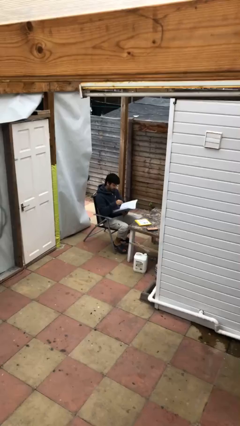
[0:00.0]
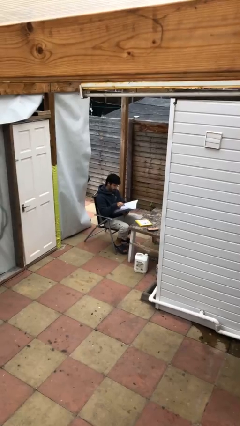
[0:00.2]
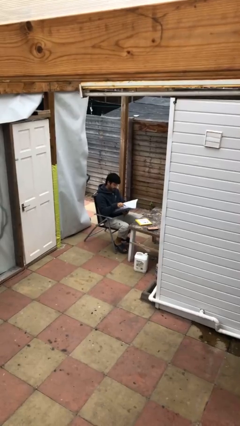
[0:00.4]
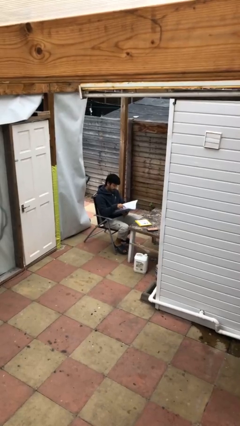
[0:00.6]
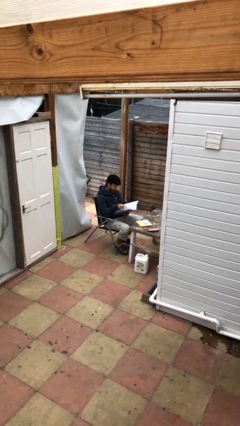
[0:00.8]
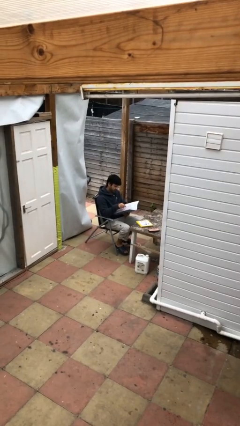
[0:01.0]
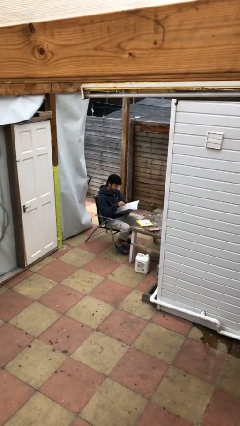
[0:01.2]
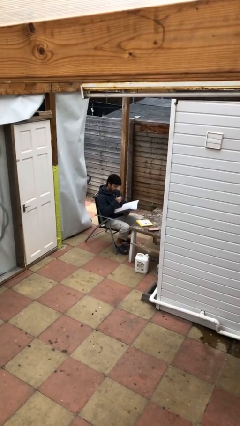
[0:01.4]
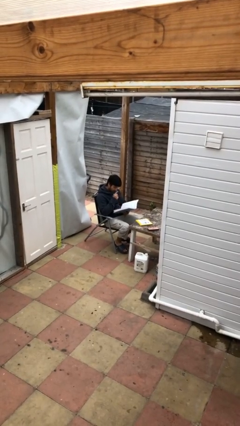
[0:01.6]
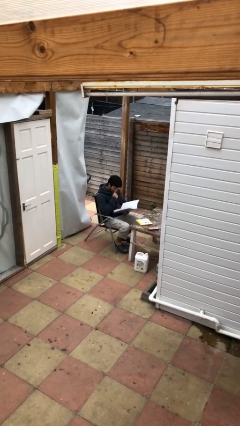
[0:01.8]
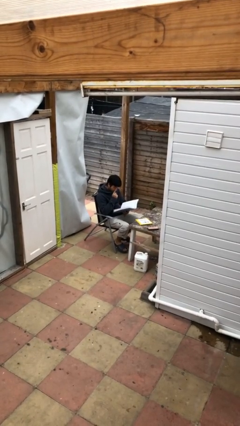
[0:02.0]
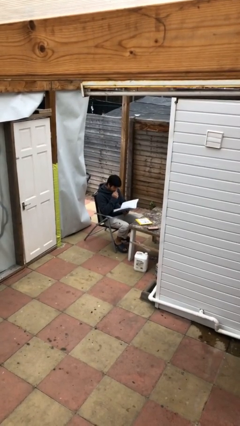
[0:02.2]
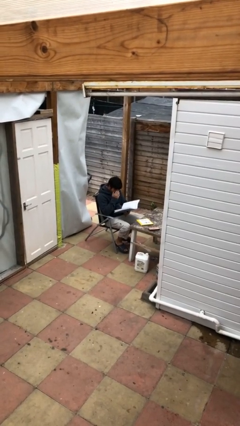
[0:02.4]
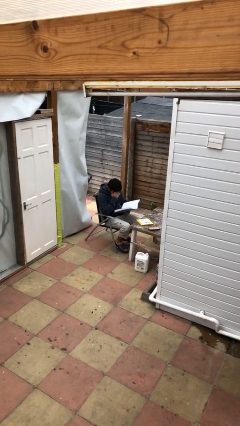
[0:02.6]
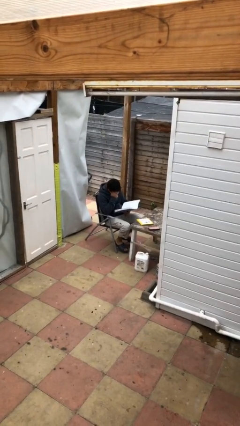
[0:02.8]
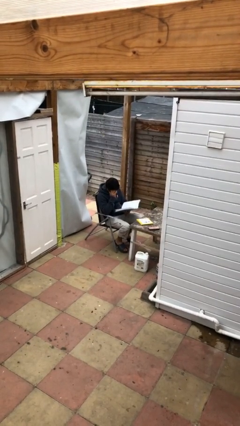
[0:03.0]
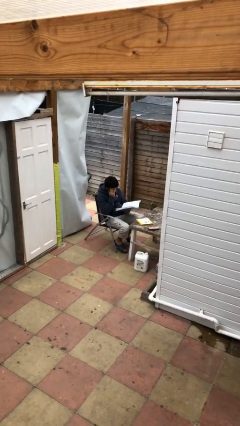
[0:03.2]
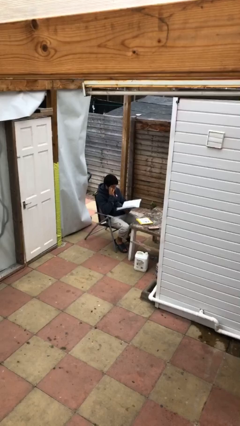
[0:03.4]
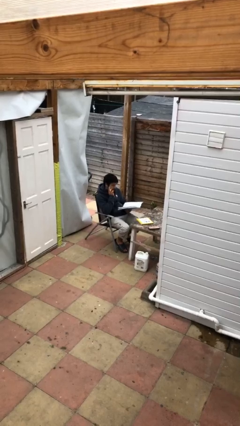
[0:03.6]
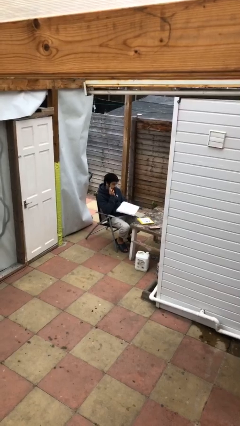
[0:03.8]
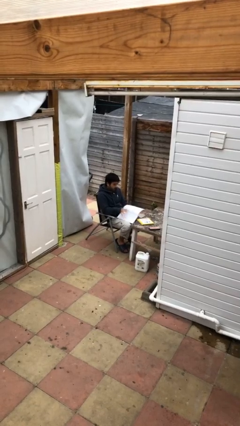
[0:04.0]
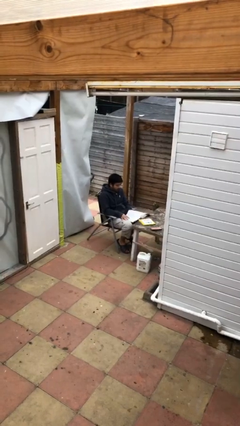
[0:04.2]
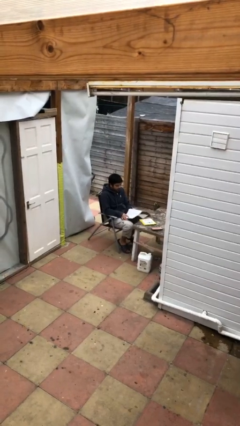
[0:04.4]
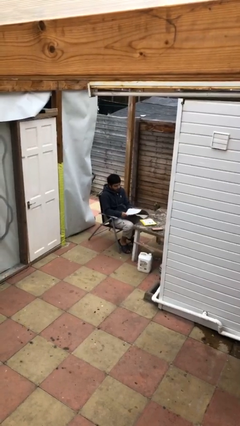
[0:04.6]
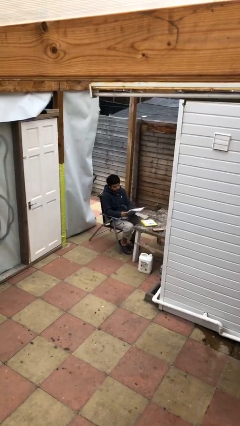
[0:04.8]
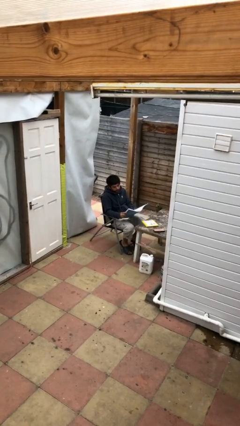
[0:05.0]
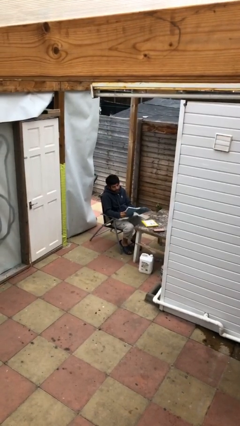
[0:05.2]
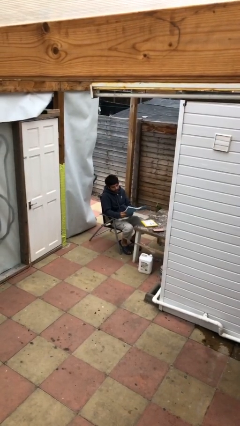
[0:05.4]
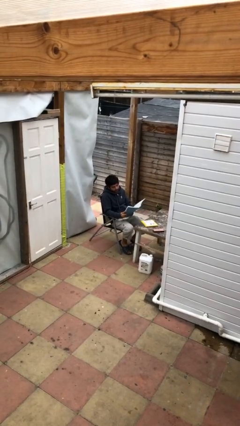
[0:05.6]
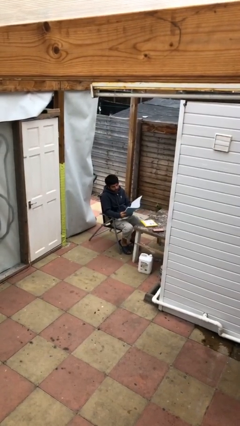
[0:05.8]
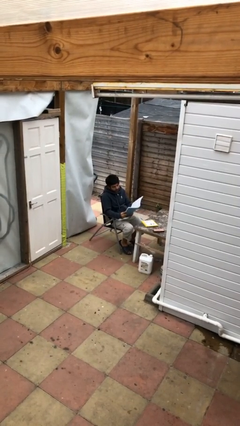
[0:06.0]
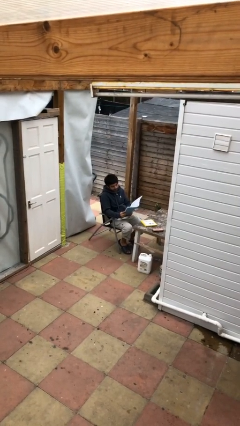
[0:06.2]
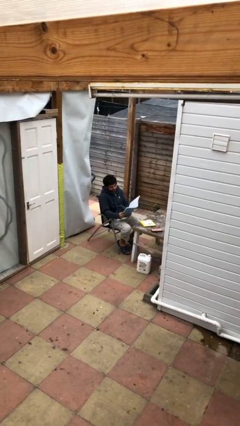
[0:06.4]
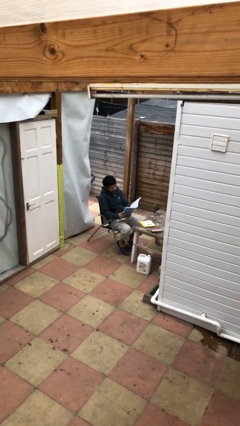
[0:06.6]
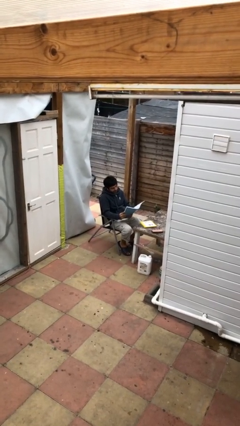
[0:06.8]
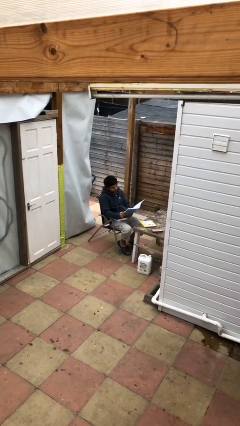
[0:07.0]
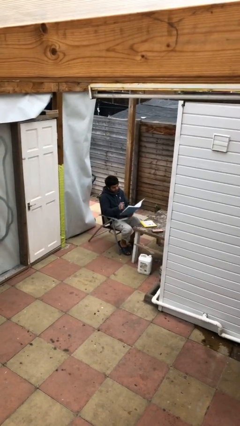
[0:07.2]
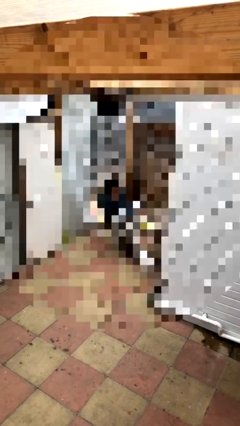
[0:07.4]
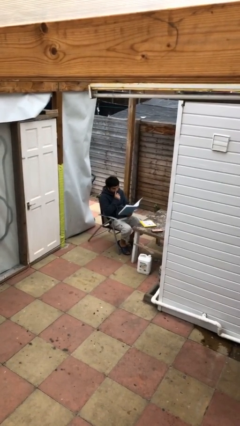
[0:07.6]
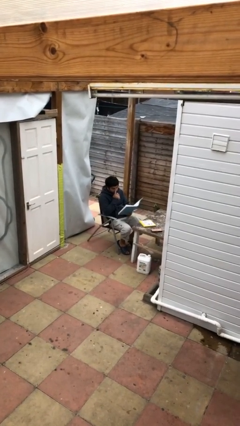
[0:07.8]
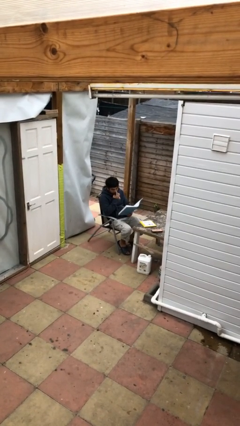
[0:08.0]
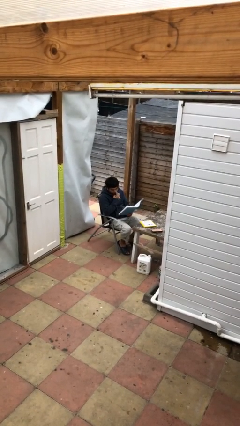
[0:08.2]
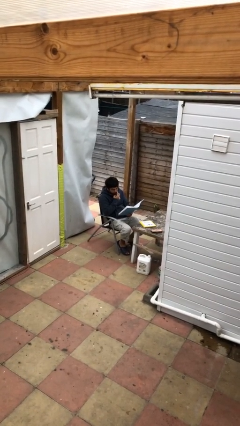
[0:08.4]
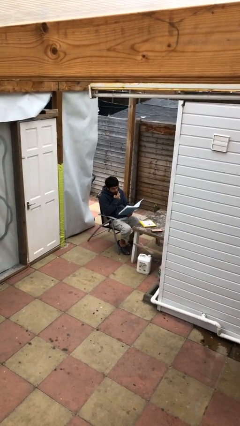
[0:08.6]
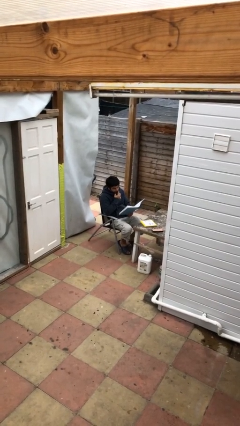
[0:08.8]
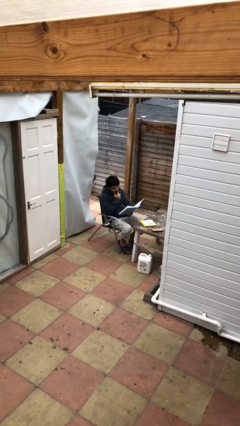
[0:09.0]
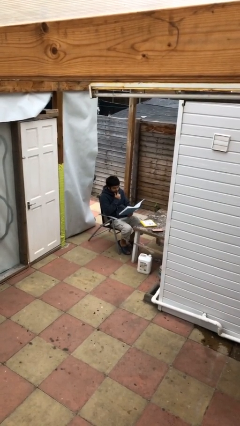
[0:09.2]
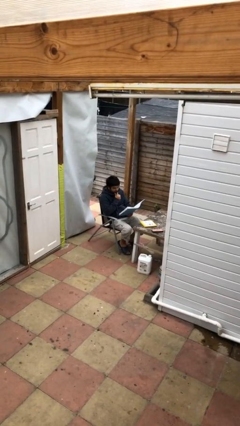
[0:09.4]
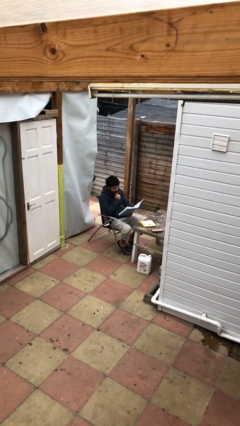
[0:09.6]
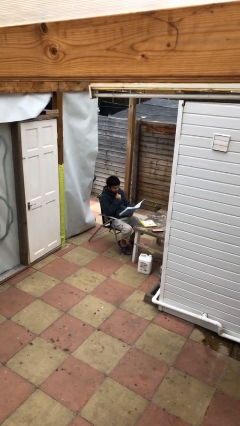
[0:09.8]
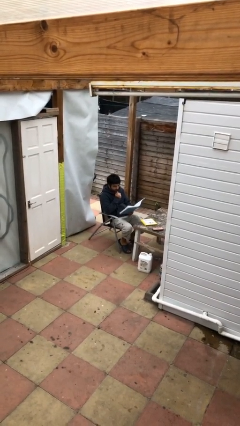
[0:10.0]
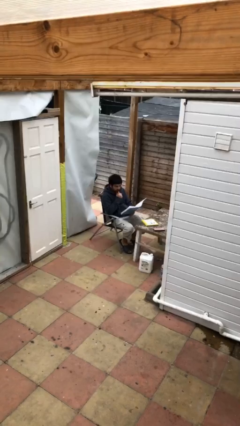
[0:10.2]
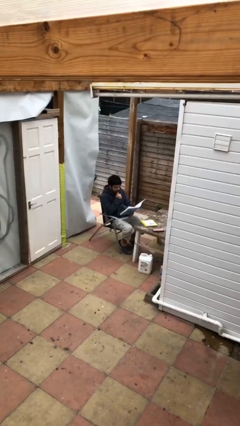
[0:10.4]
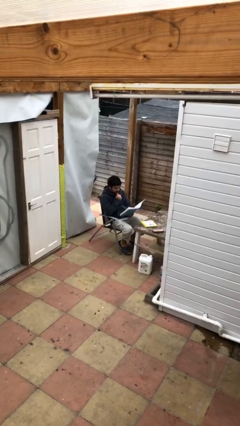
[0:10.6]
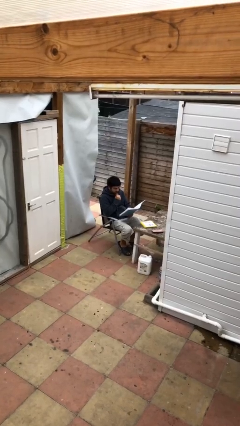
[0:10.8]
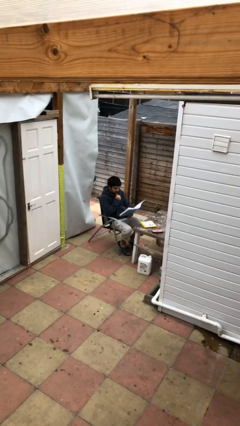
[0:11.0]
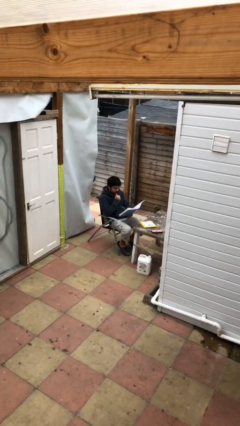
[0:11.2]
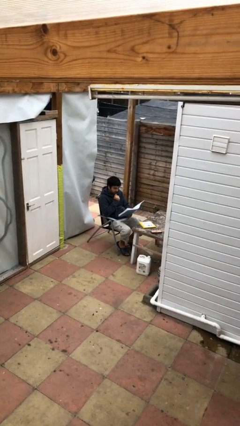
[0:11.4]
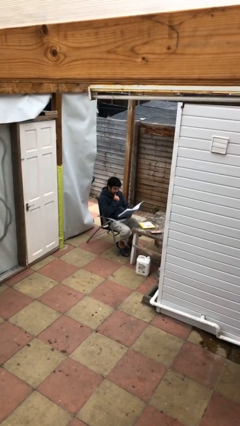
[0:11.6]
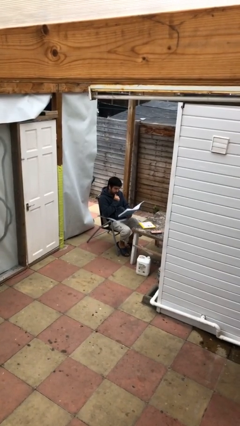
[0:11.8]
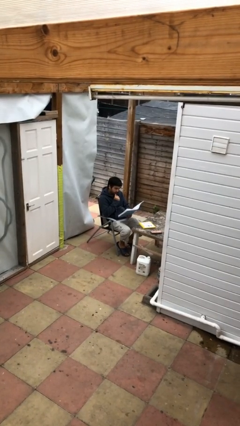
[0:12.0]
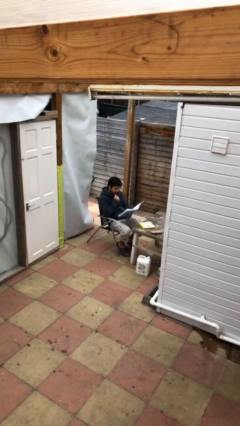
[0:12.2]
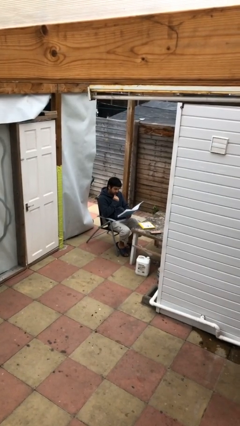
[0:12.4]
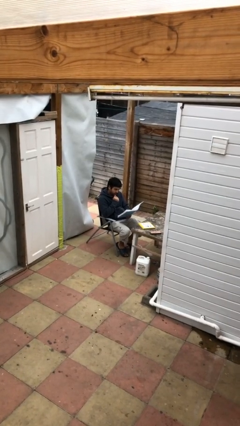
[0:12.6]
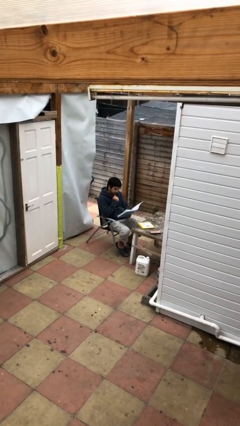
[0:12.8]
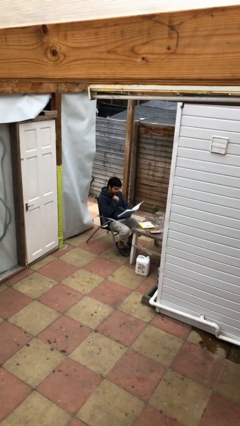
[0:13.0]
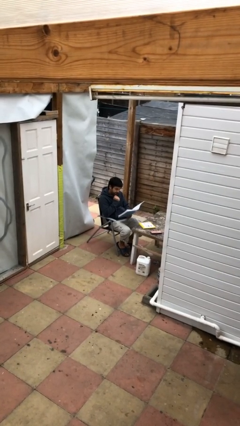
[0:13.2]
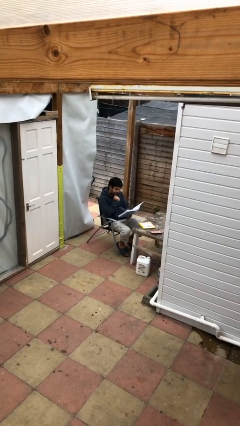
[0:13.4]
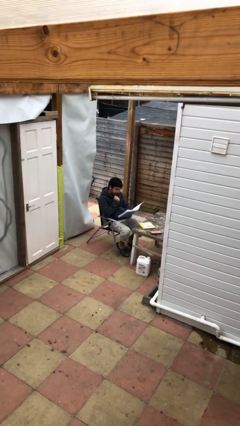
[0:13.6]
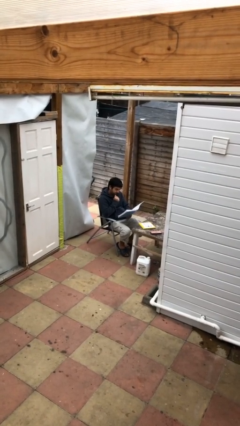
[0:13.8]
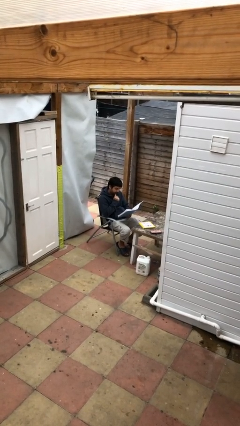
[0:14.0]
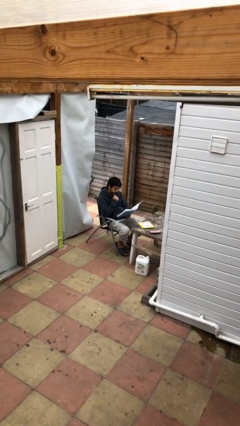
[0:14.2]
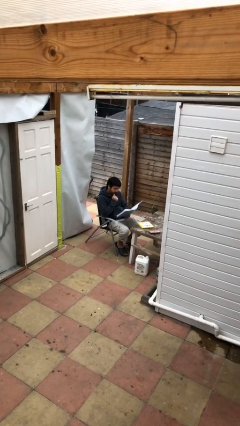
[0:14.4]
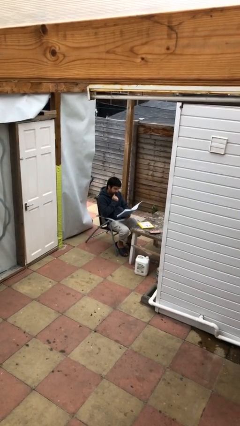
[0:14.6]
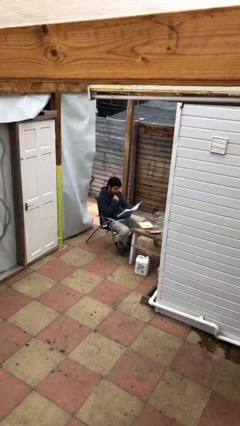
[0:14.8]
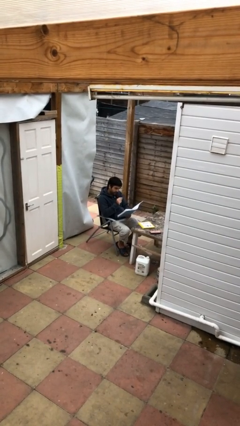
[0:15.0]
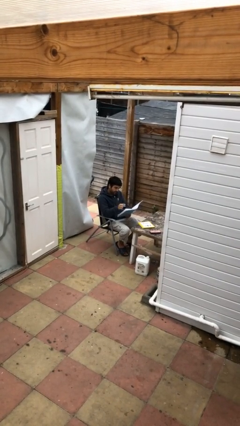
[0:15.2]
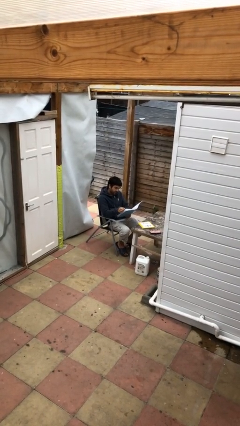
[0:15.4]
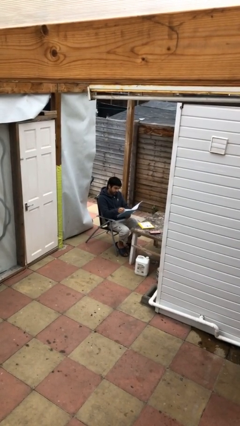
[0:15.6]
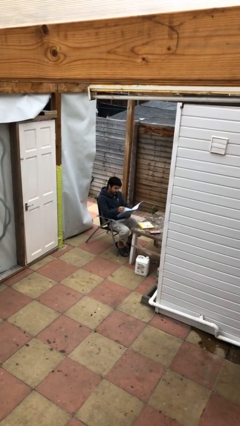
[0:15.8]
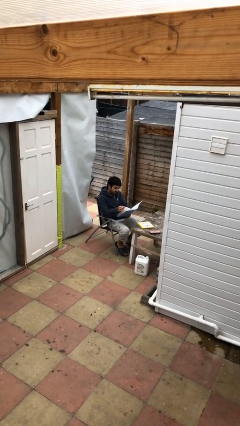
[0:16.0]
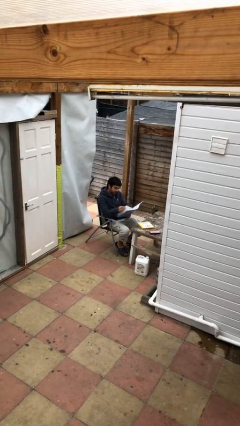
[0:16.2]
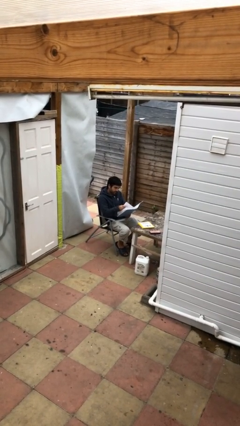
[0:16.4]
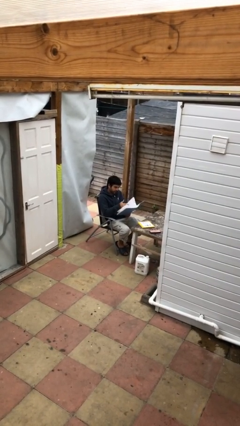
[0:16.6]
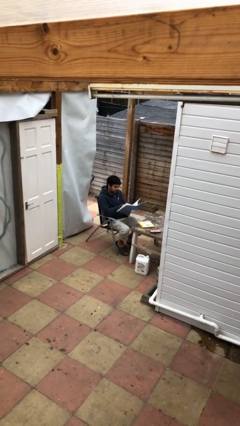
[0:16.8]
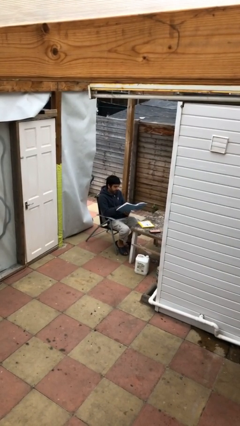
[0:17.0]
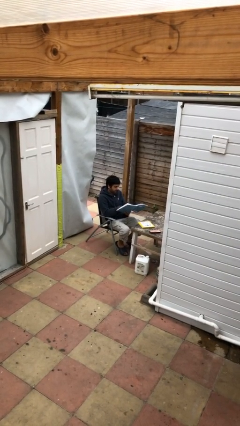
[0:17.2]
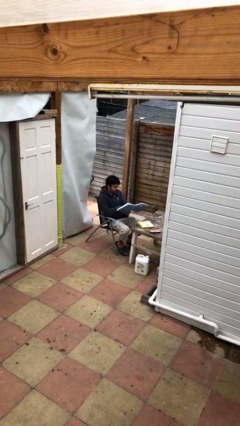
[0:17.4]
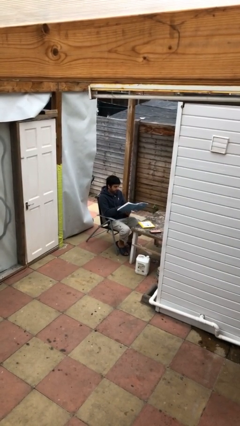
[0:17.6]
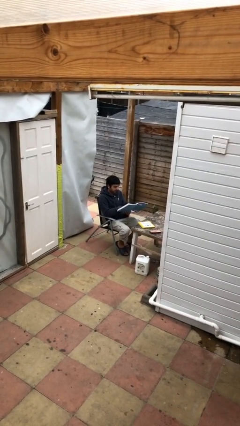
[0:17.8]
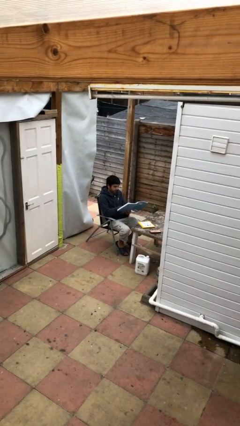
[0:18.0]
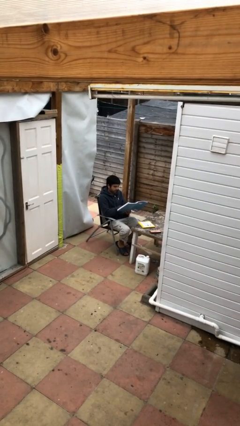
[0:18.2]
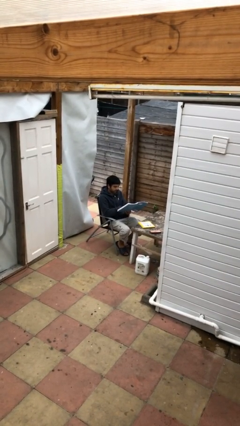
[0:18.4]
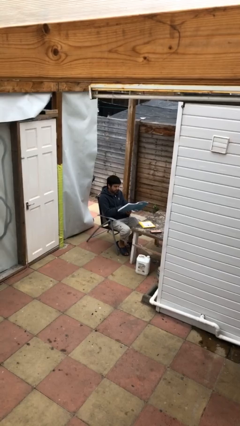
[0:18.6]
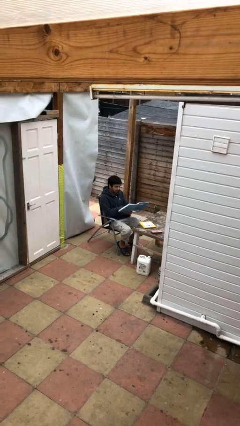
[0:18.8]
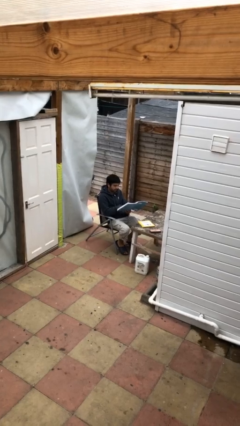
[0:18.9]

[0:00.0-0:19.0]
person reads document
